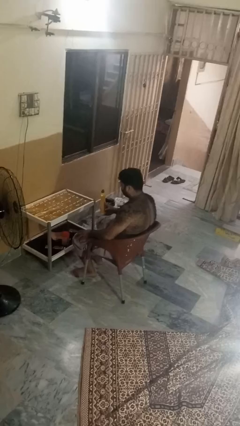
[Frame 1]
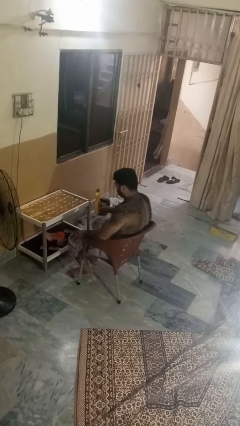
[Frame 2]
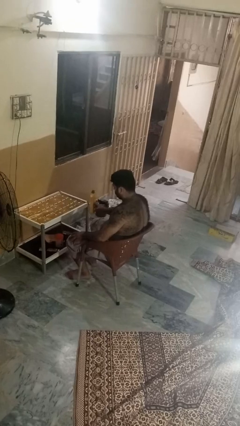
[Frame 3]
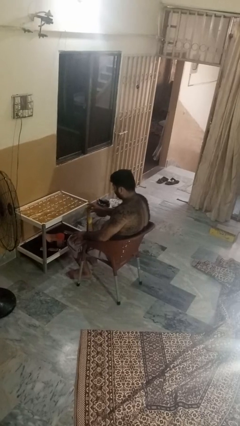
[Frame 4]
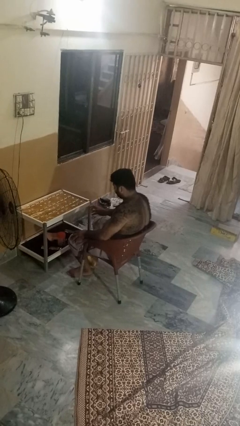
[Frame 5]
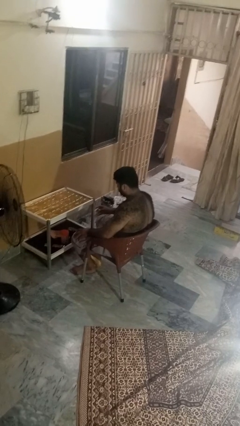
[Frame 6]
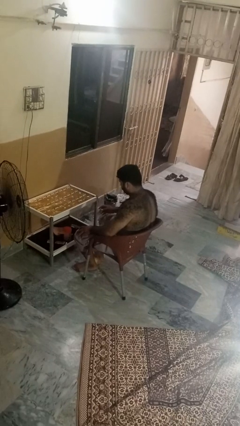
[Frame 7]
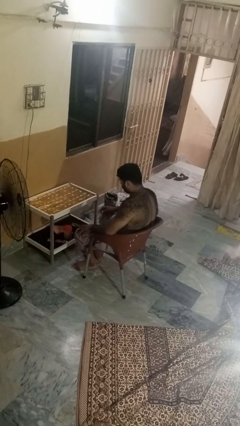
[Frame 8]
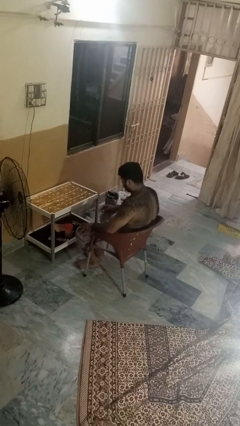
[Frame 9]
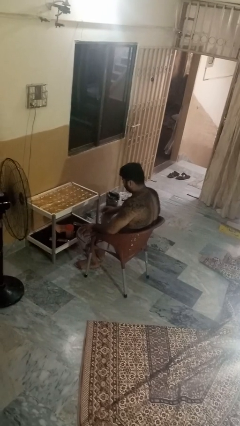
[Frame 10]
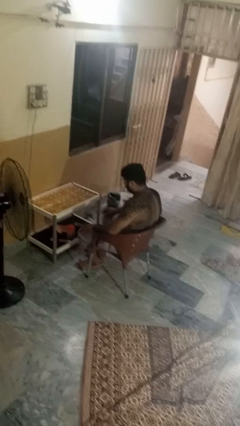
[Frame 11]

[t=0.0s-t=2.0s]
person throws object to ground

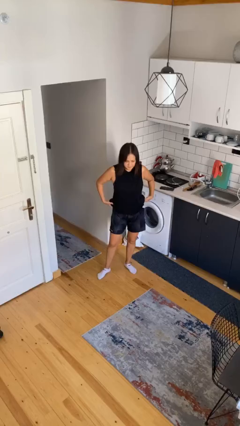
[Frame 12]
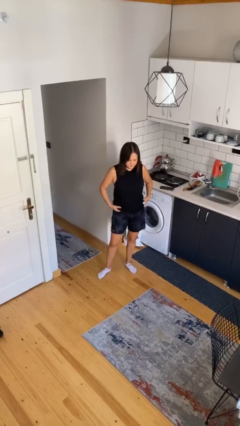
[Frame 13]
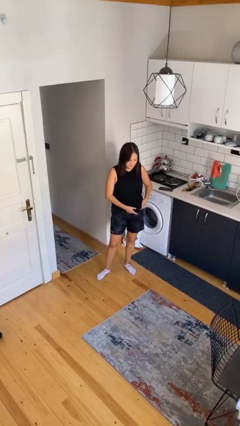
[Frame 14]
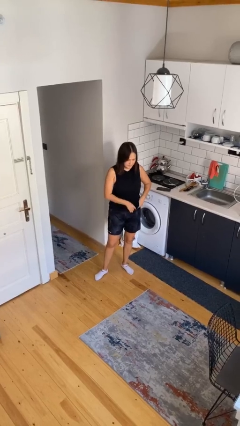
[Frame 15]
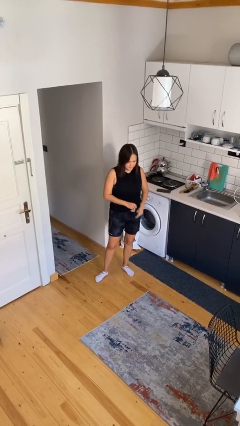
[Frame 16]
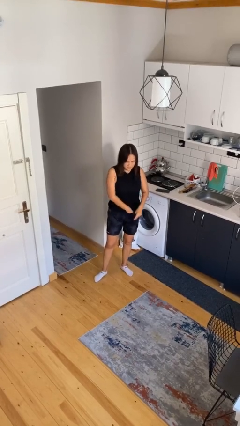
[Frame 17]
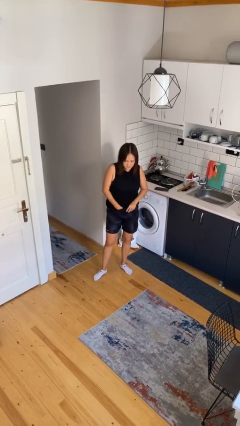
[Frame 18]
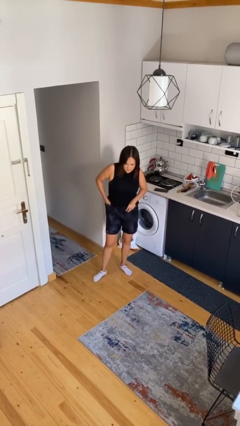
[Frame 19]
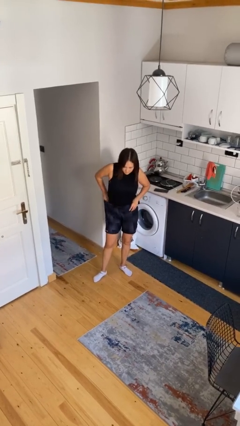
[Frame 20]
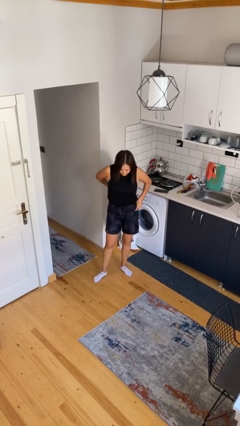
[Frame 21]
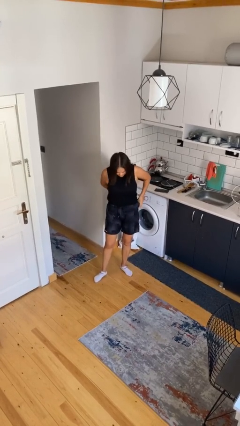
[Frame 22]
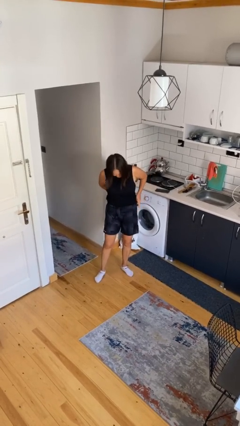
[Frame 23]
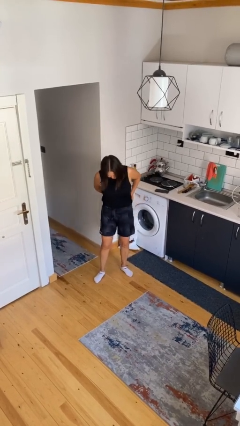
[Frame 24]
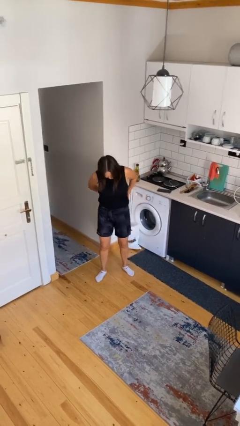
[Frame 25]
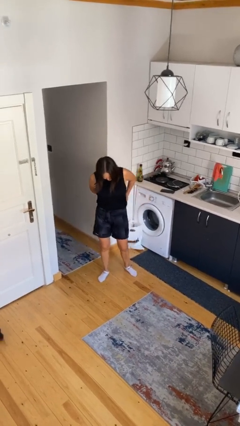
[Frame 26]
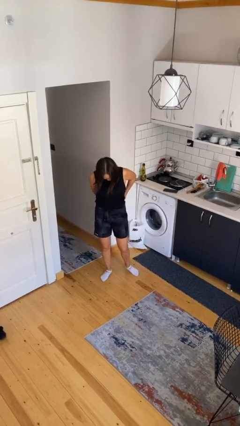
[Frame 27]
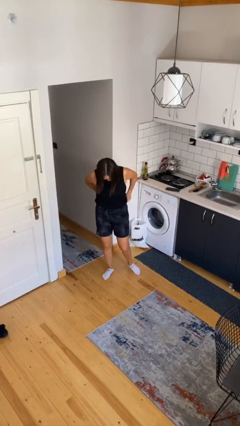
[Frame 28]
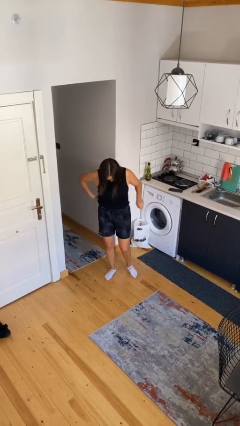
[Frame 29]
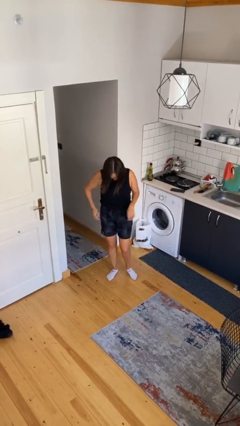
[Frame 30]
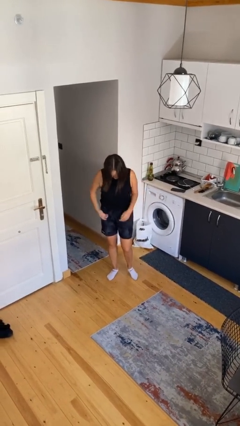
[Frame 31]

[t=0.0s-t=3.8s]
person tucks in shirt

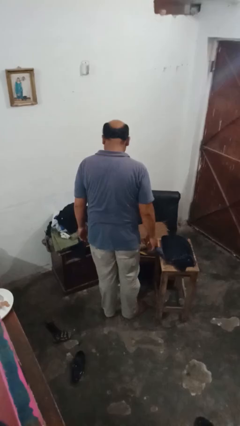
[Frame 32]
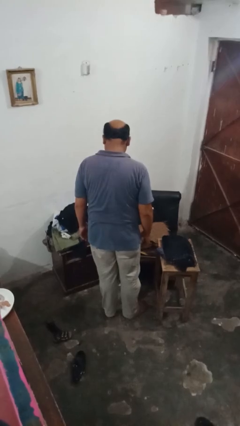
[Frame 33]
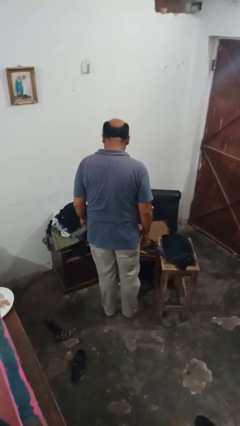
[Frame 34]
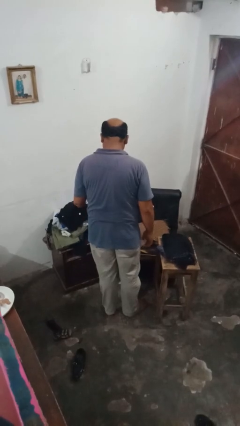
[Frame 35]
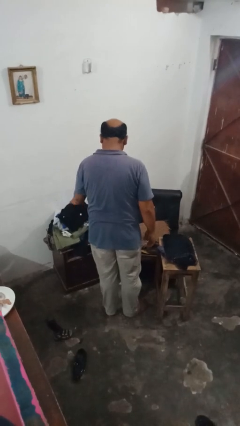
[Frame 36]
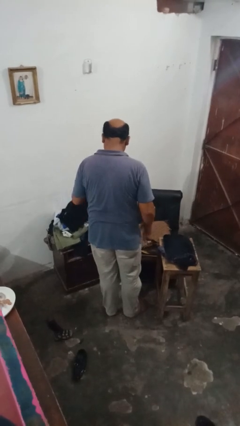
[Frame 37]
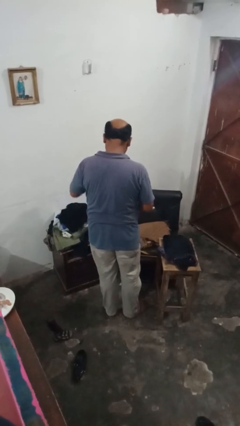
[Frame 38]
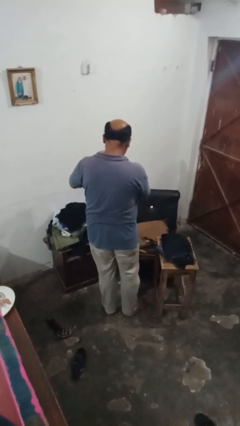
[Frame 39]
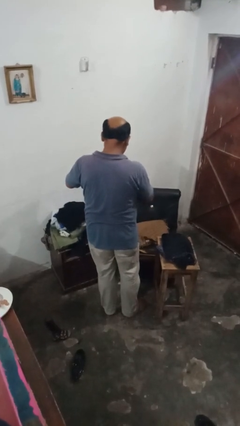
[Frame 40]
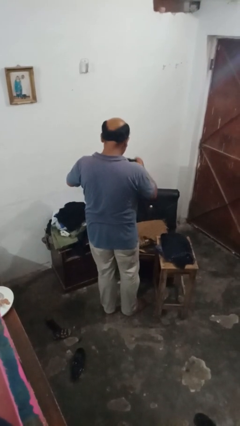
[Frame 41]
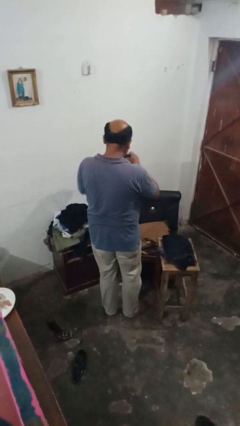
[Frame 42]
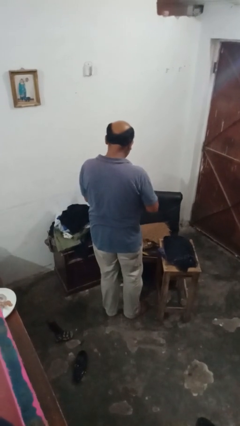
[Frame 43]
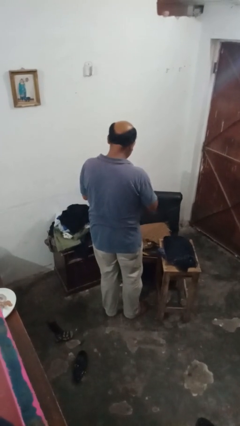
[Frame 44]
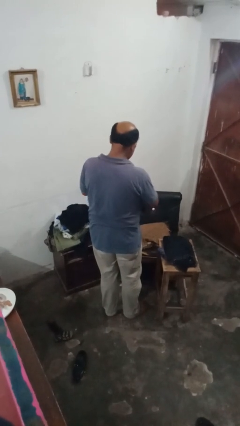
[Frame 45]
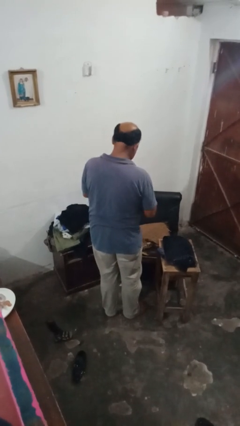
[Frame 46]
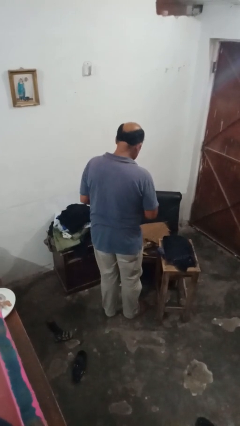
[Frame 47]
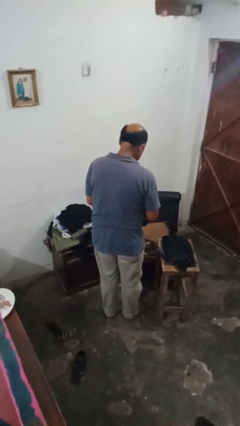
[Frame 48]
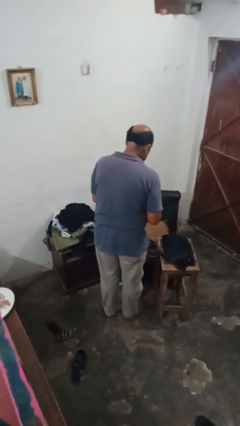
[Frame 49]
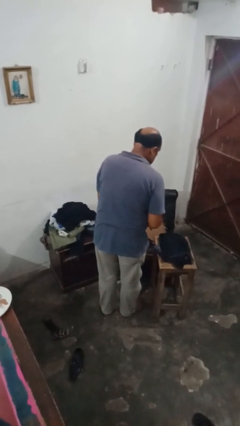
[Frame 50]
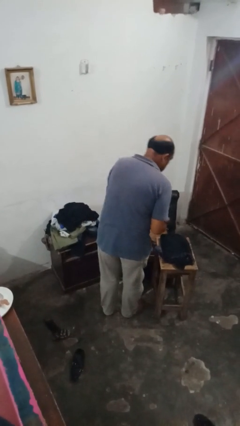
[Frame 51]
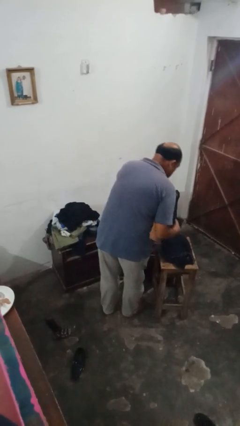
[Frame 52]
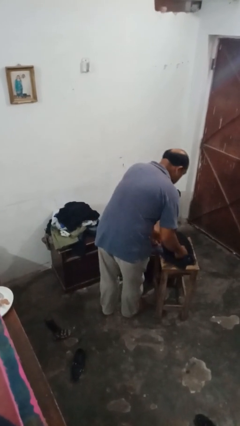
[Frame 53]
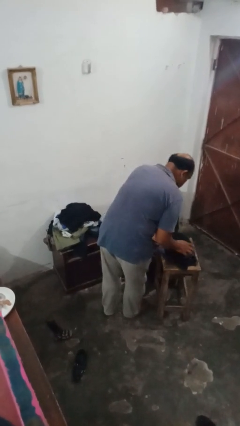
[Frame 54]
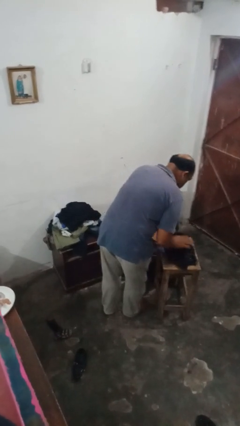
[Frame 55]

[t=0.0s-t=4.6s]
person folds shirt

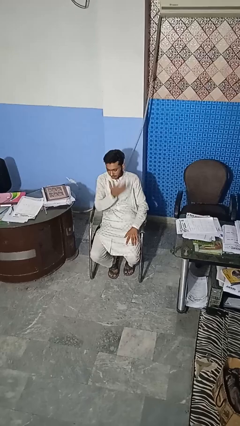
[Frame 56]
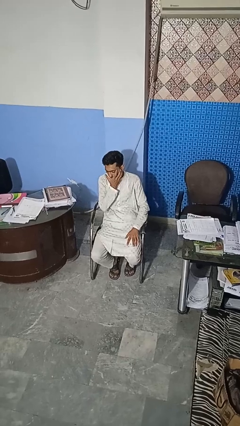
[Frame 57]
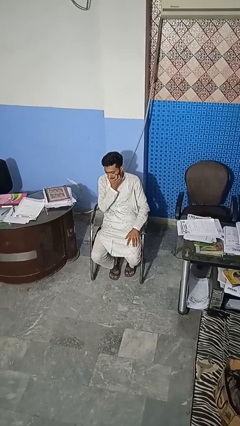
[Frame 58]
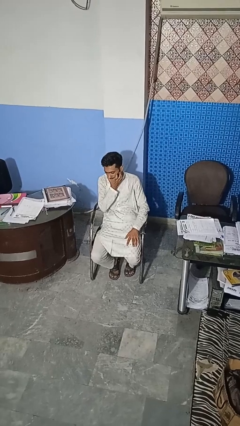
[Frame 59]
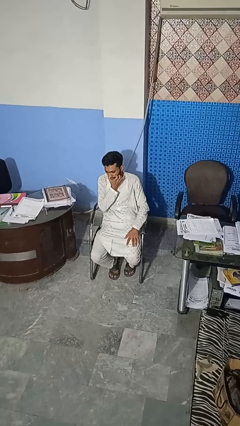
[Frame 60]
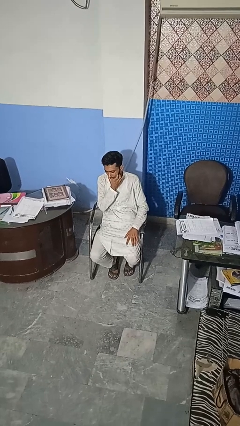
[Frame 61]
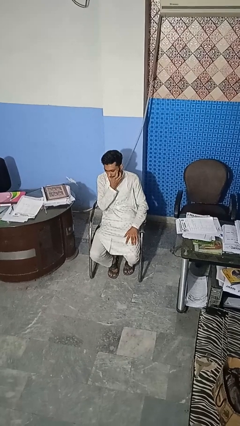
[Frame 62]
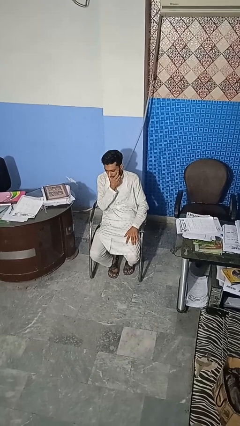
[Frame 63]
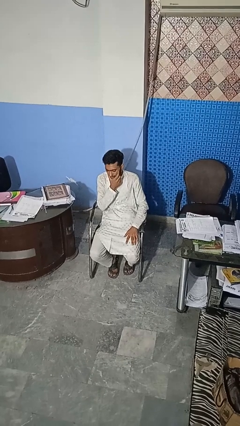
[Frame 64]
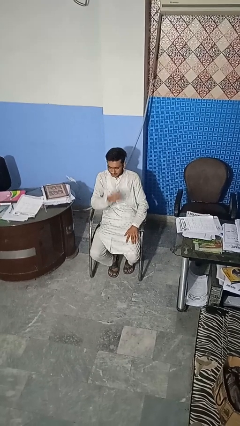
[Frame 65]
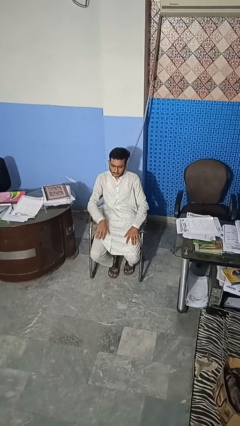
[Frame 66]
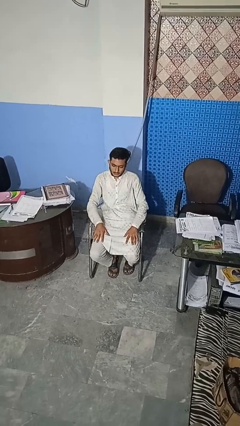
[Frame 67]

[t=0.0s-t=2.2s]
person scratches face

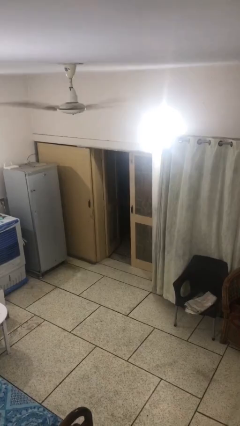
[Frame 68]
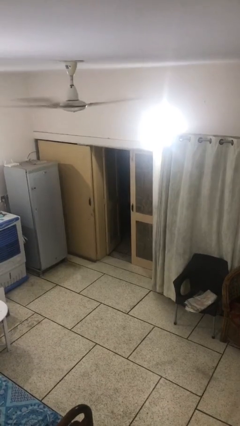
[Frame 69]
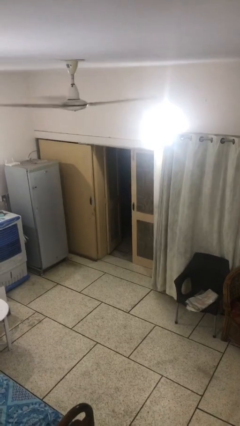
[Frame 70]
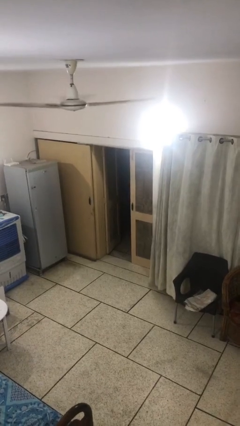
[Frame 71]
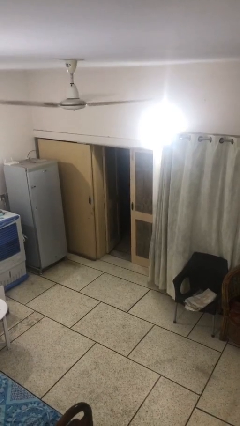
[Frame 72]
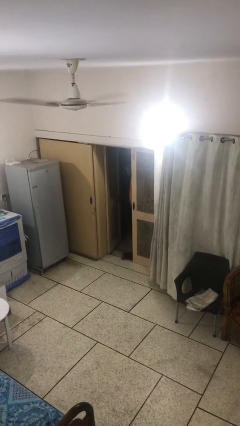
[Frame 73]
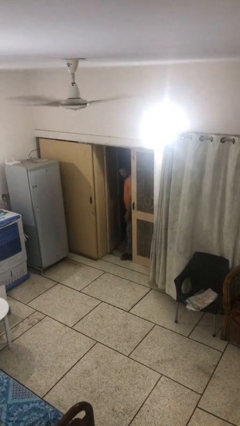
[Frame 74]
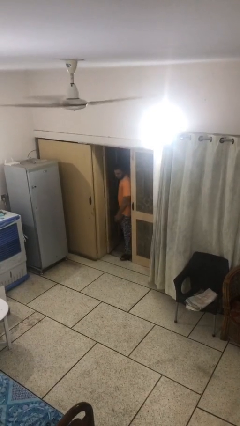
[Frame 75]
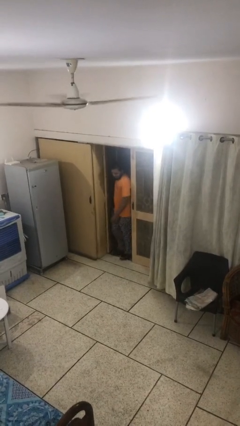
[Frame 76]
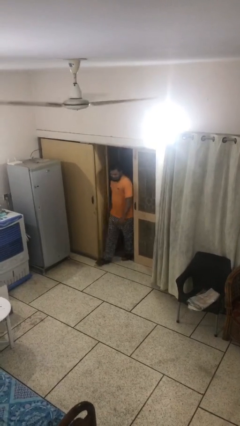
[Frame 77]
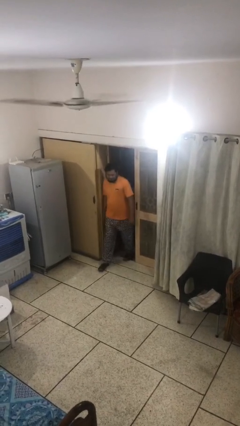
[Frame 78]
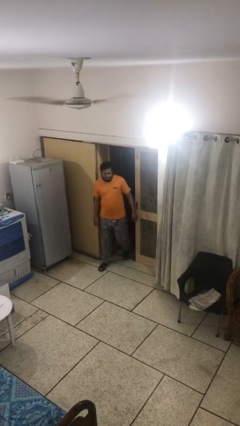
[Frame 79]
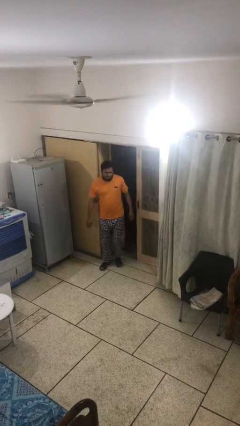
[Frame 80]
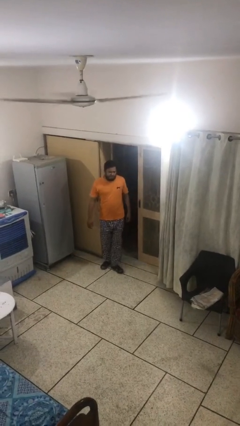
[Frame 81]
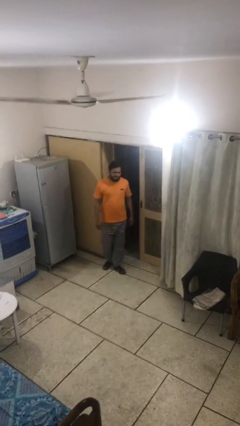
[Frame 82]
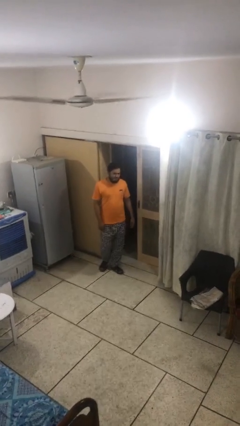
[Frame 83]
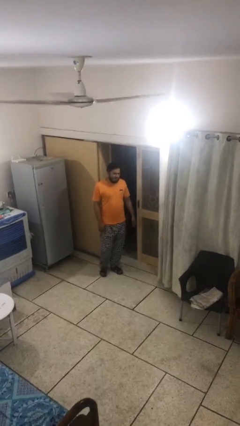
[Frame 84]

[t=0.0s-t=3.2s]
person enters scene through structure

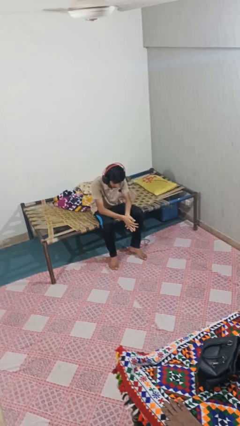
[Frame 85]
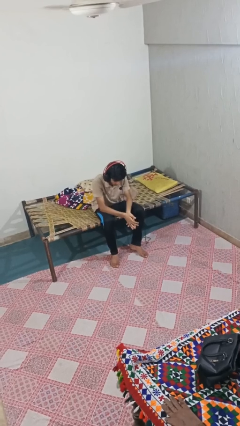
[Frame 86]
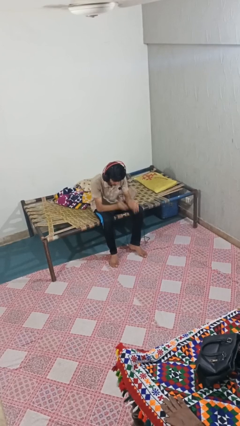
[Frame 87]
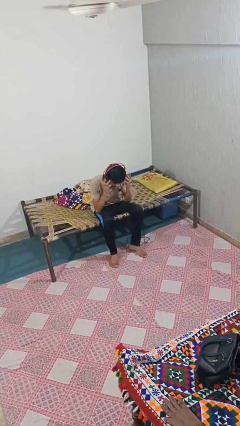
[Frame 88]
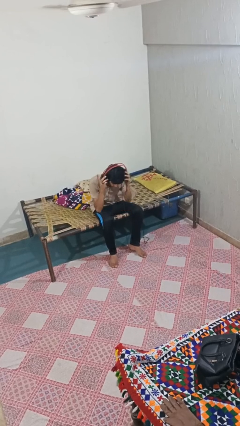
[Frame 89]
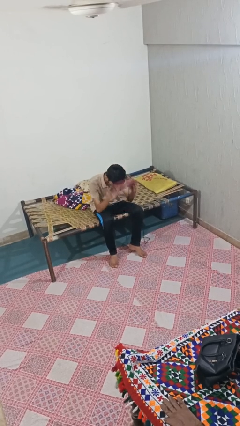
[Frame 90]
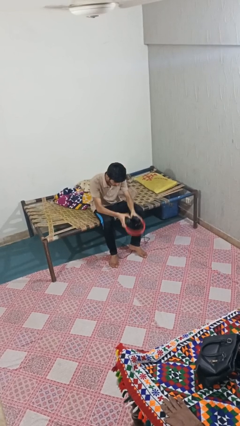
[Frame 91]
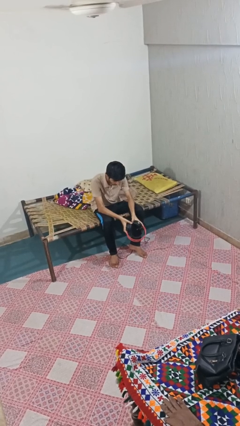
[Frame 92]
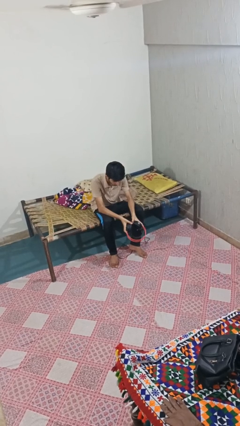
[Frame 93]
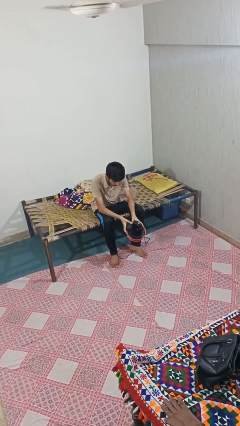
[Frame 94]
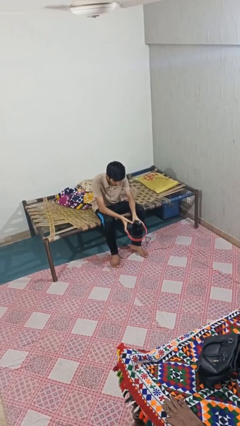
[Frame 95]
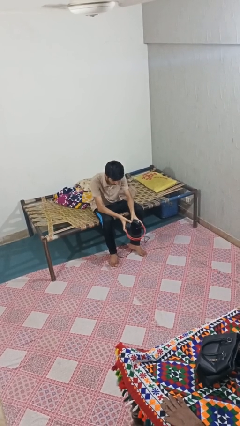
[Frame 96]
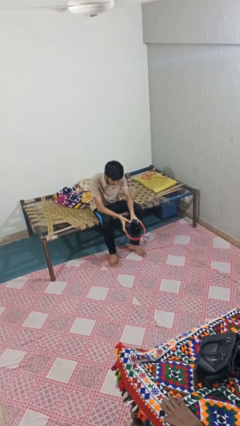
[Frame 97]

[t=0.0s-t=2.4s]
person takes off headphones
